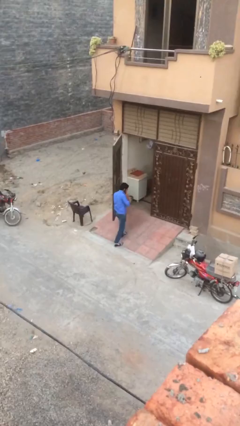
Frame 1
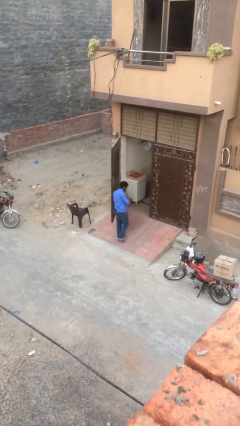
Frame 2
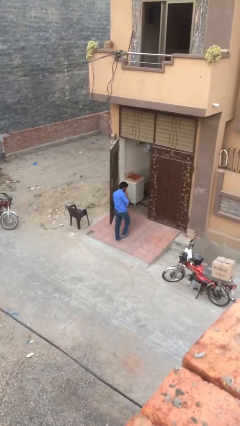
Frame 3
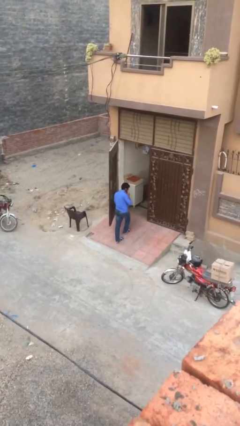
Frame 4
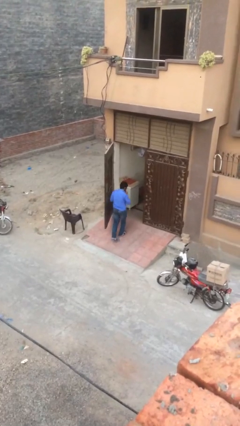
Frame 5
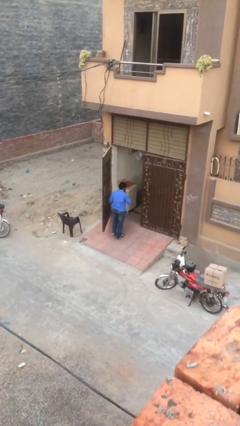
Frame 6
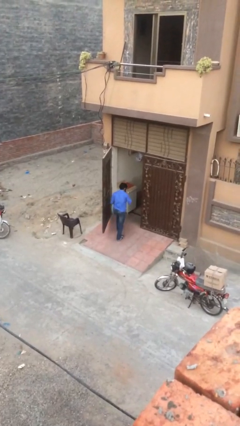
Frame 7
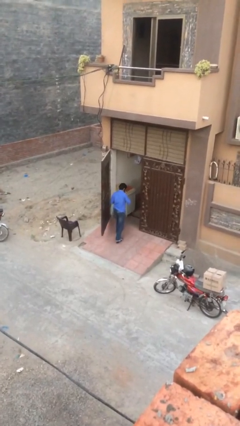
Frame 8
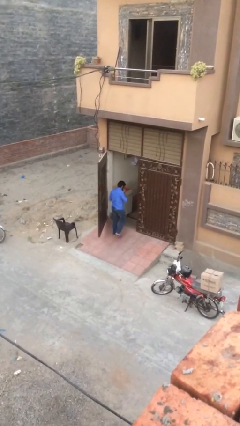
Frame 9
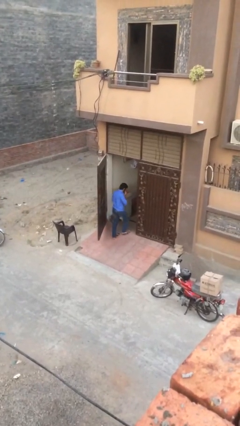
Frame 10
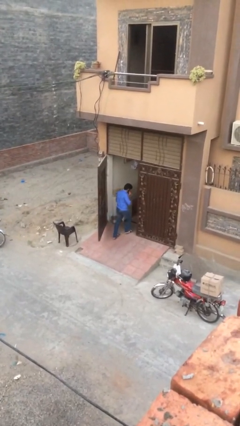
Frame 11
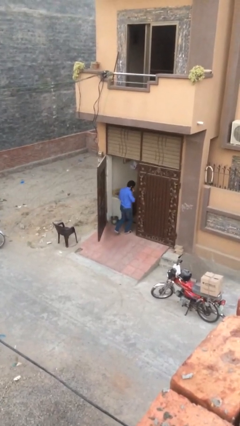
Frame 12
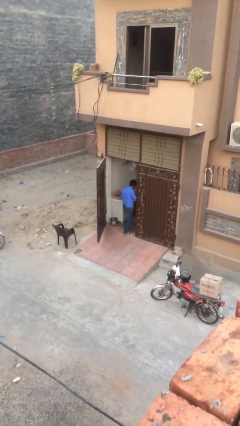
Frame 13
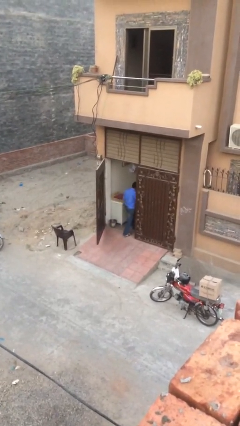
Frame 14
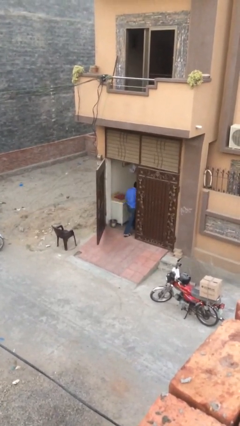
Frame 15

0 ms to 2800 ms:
person exits scene through structure

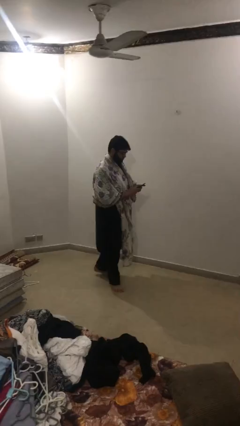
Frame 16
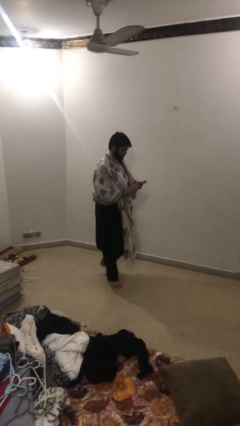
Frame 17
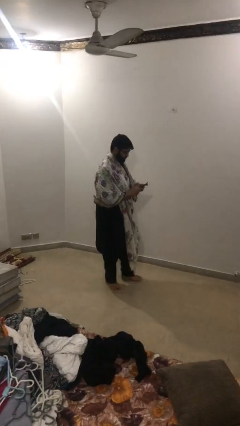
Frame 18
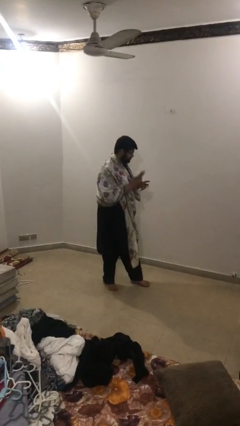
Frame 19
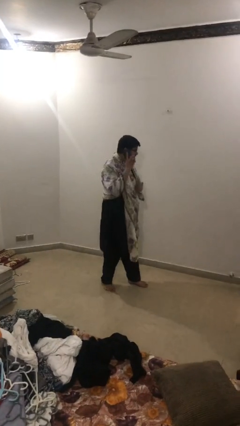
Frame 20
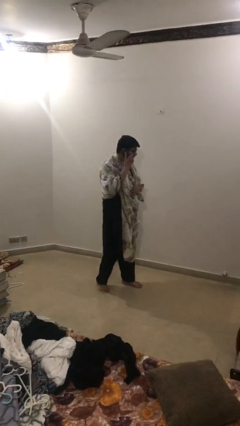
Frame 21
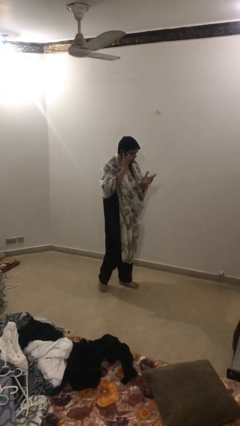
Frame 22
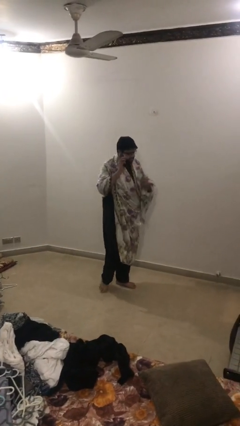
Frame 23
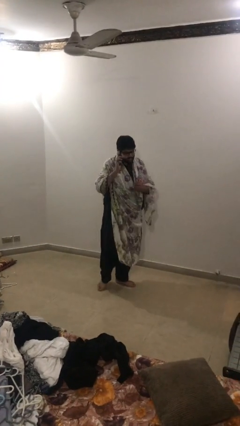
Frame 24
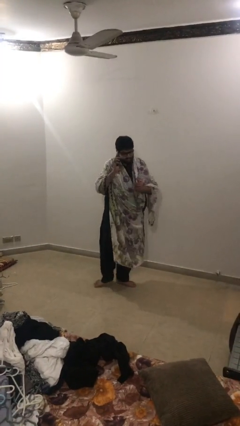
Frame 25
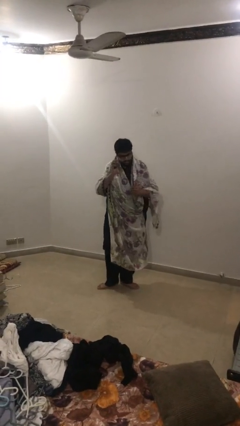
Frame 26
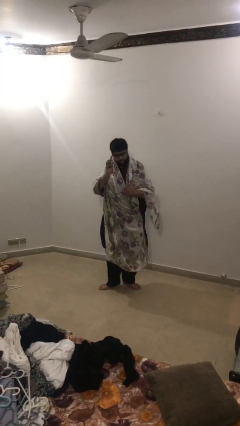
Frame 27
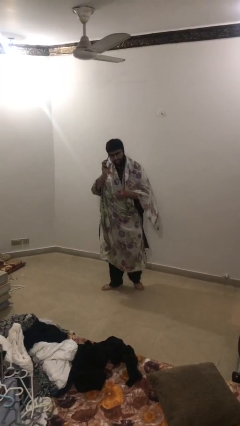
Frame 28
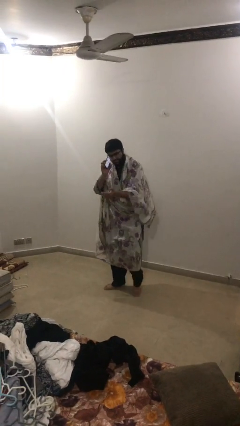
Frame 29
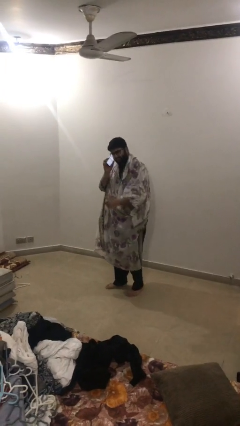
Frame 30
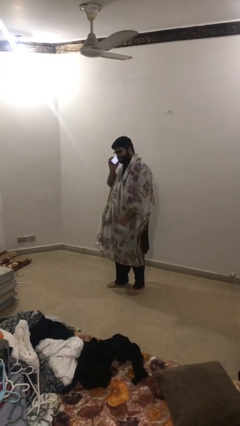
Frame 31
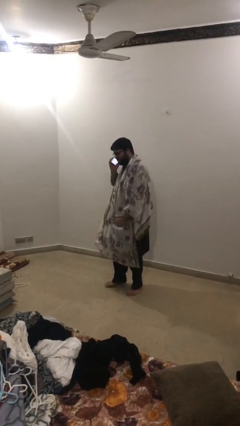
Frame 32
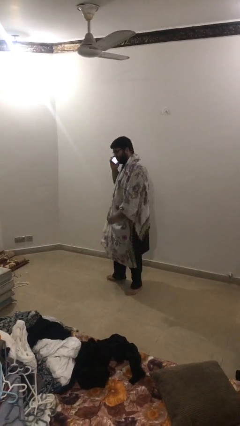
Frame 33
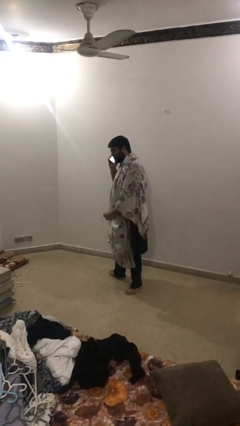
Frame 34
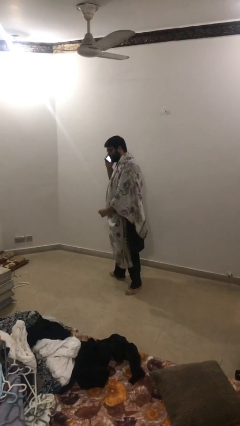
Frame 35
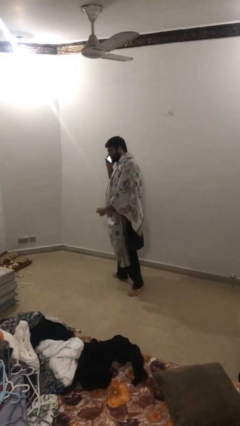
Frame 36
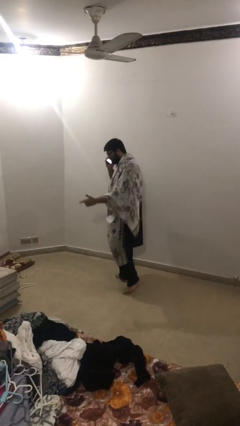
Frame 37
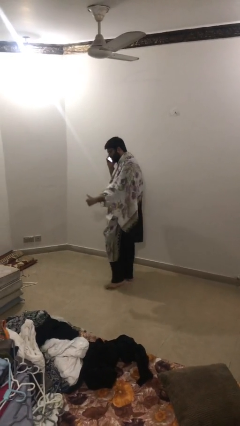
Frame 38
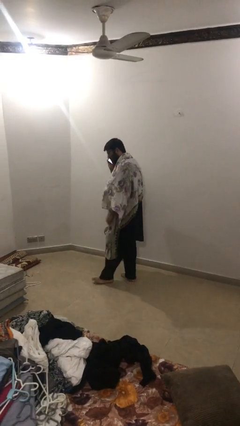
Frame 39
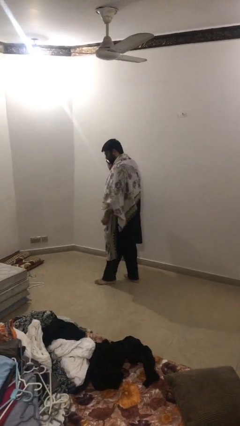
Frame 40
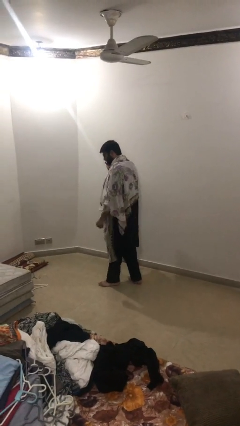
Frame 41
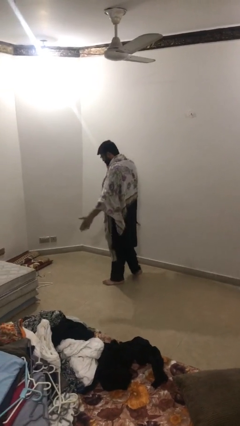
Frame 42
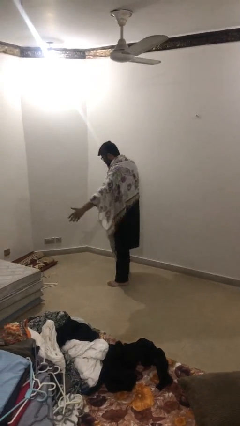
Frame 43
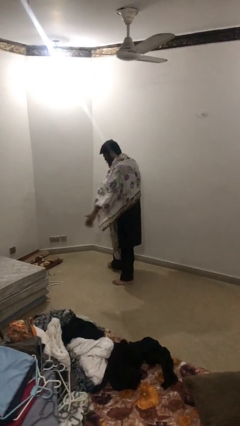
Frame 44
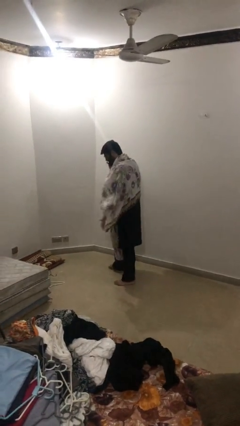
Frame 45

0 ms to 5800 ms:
person talks on phone

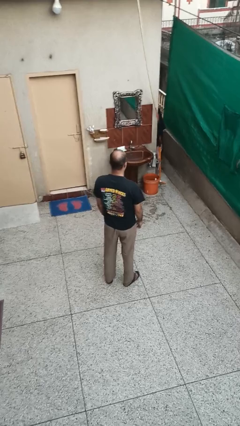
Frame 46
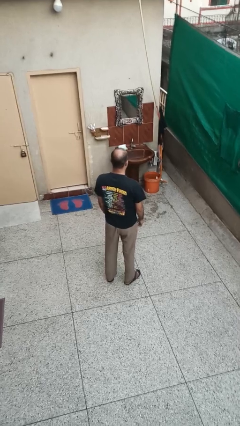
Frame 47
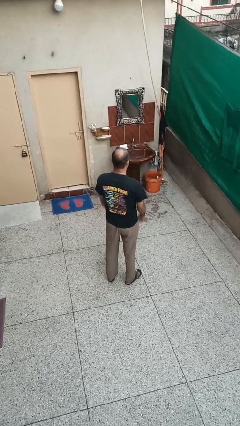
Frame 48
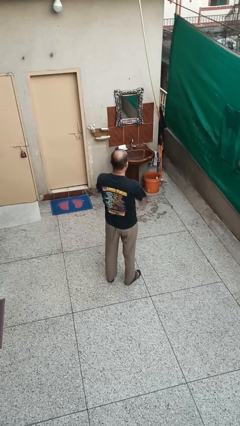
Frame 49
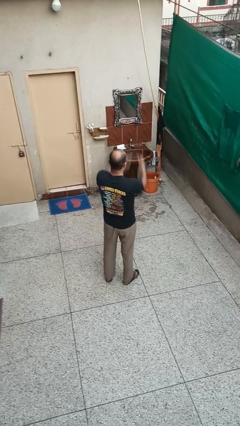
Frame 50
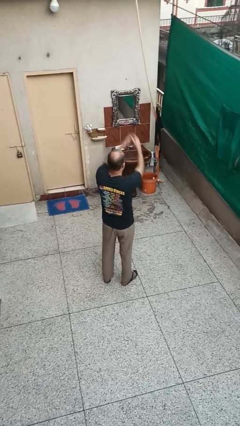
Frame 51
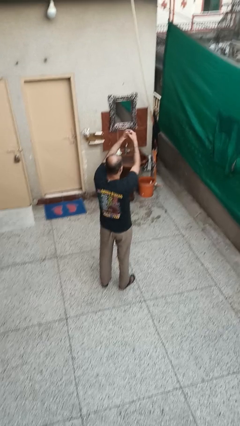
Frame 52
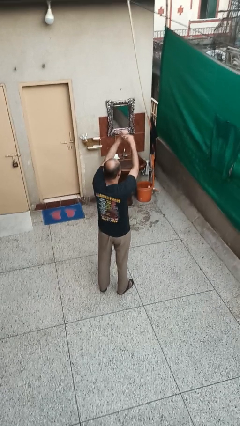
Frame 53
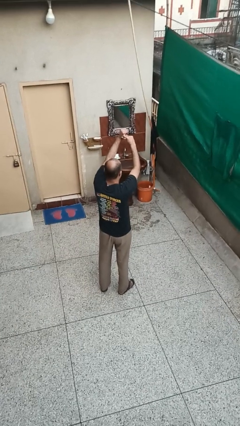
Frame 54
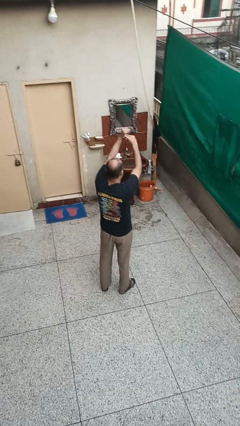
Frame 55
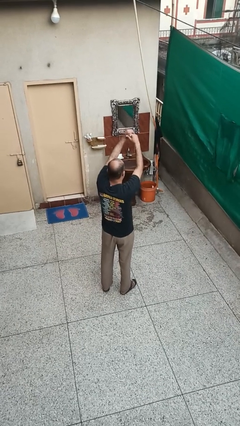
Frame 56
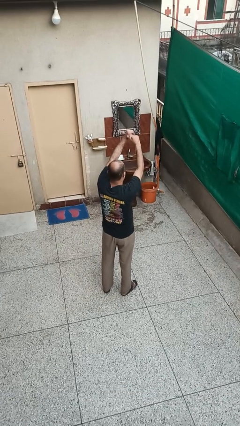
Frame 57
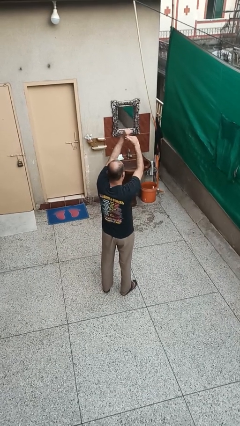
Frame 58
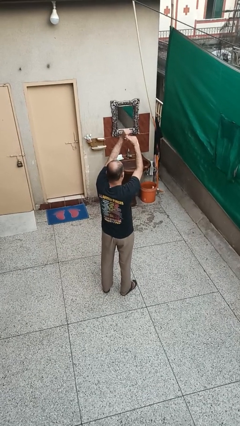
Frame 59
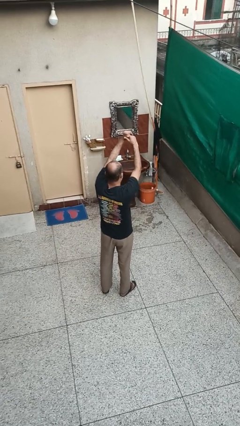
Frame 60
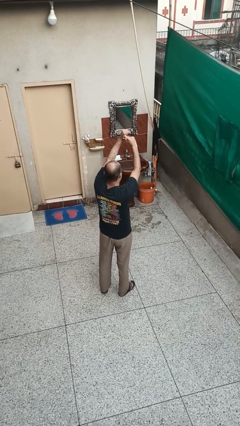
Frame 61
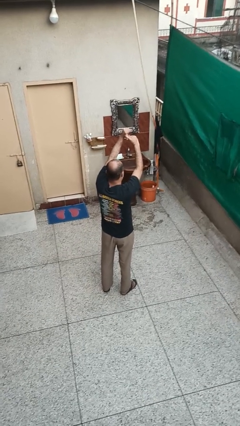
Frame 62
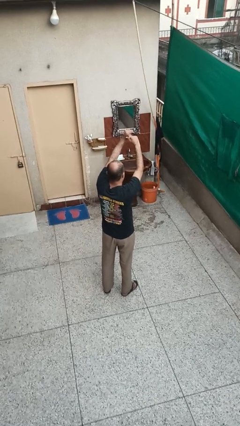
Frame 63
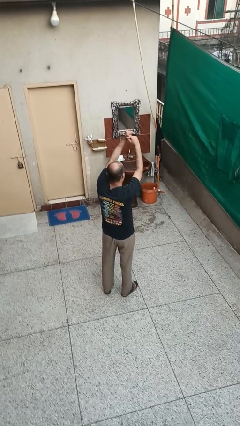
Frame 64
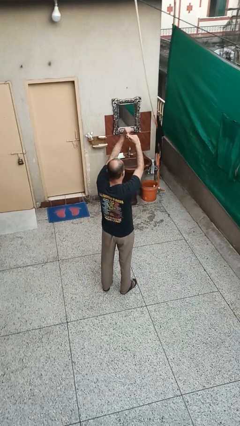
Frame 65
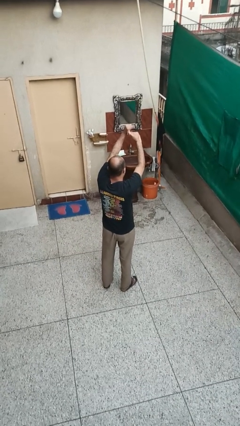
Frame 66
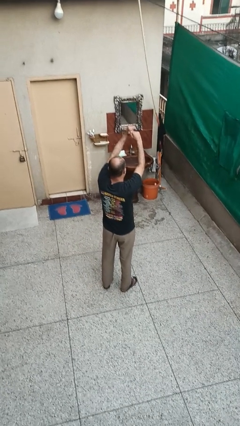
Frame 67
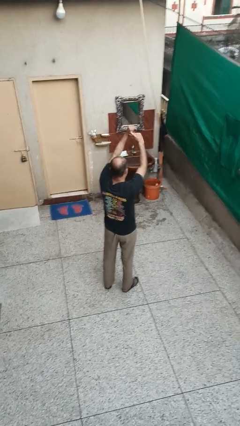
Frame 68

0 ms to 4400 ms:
person cracks knuckles

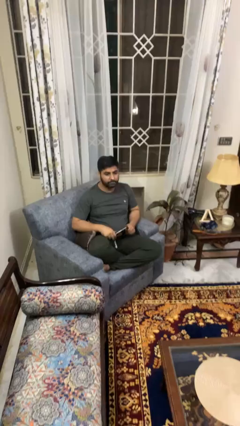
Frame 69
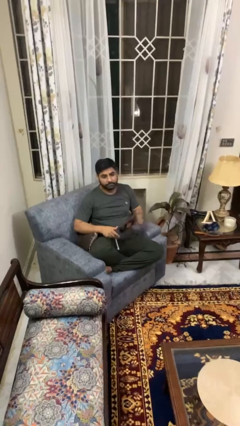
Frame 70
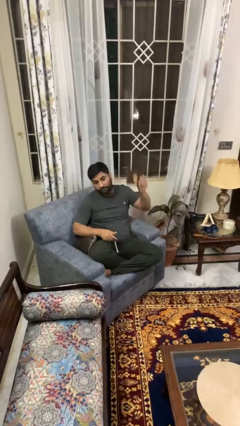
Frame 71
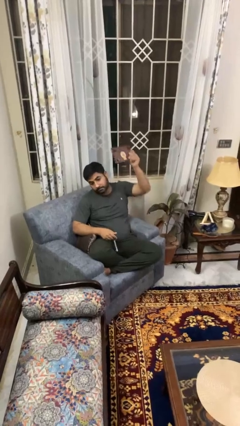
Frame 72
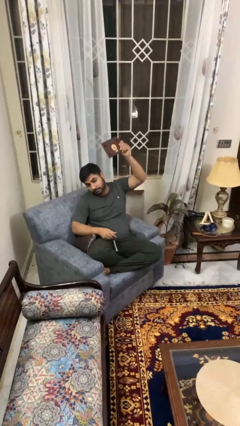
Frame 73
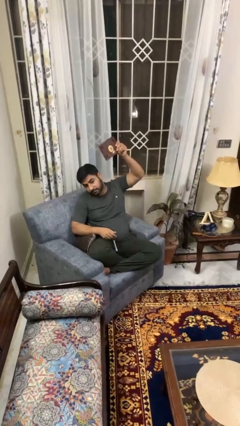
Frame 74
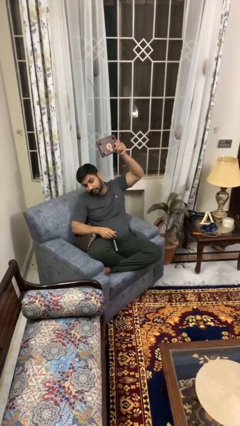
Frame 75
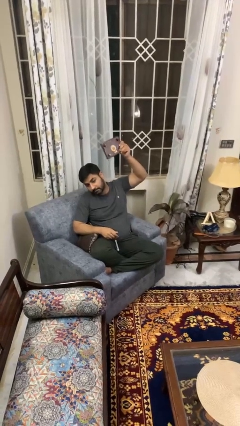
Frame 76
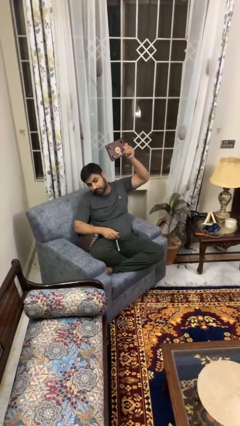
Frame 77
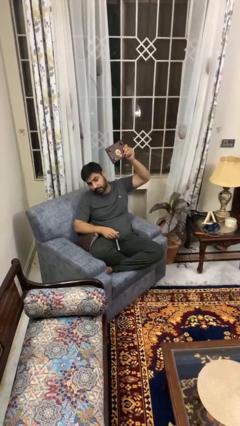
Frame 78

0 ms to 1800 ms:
person holds object above head

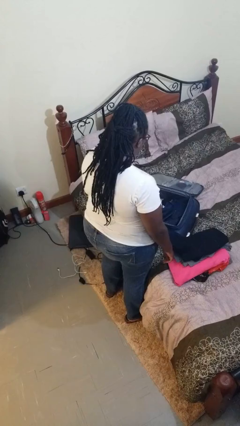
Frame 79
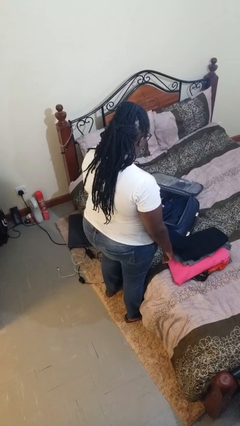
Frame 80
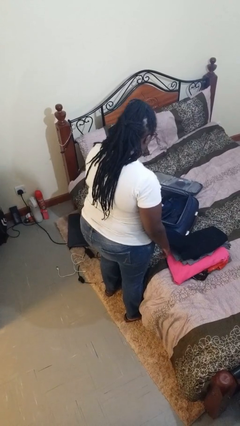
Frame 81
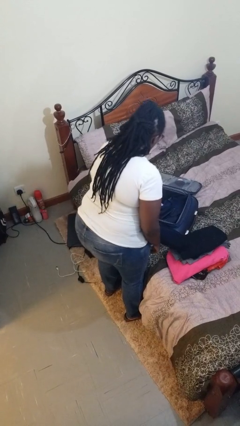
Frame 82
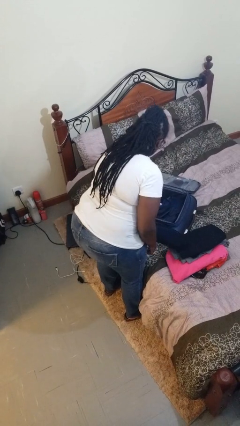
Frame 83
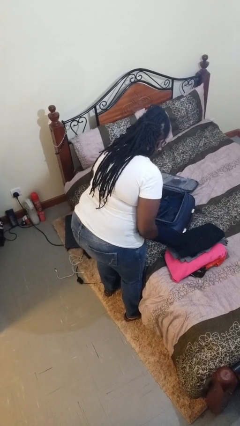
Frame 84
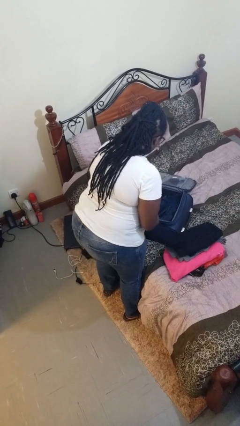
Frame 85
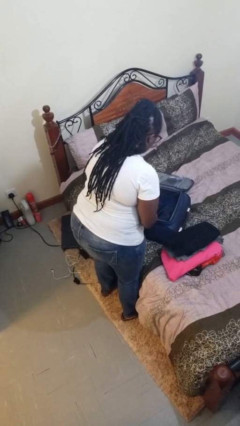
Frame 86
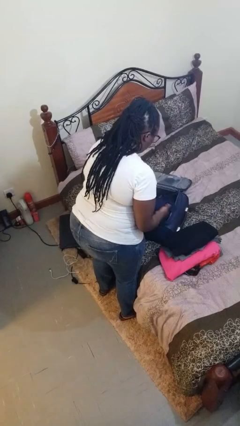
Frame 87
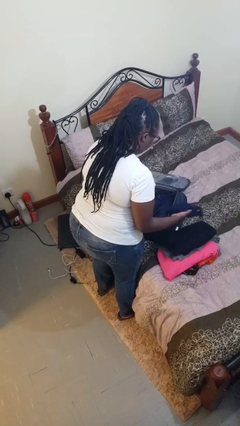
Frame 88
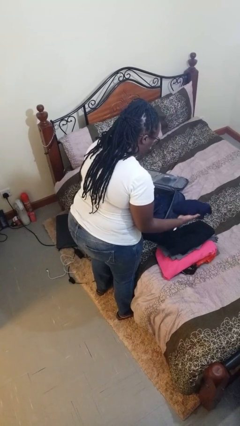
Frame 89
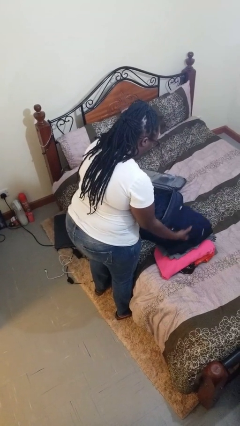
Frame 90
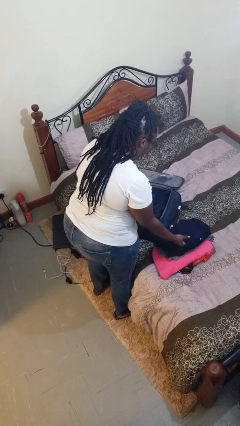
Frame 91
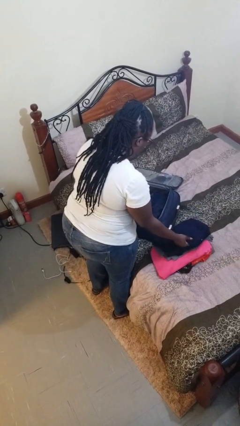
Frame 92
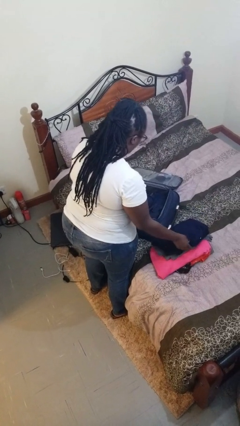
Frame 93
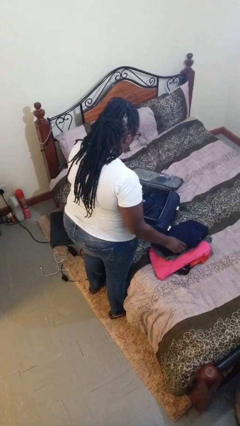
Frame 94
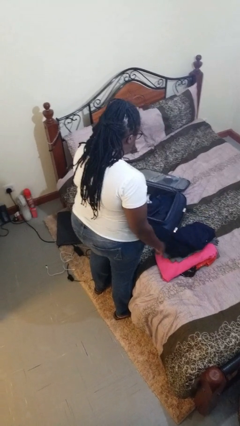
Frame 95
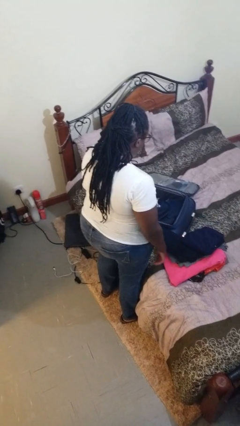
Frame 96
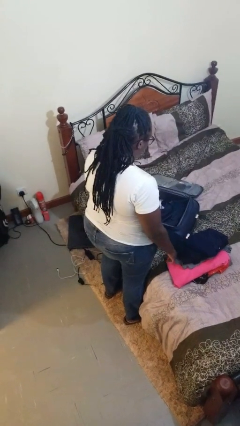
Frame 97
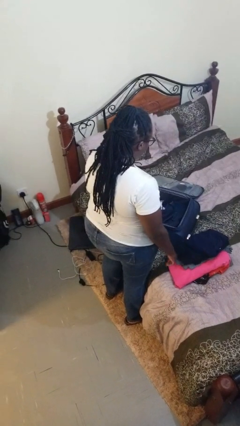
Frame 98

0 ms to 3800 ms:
person unloads clothes from suitcase
